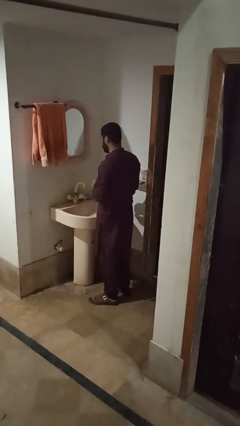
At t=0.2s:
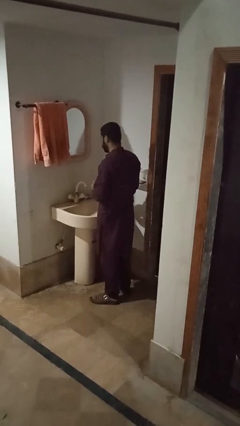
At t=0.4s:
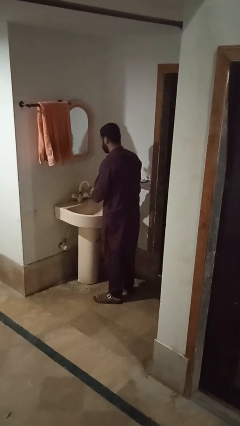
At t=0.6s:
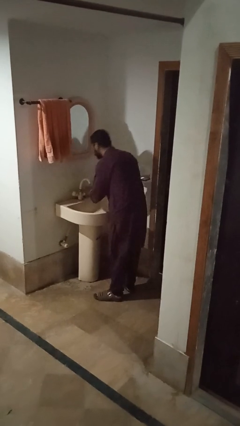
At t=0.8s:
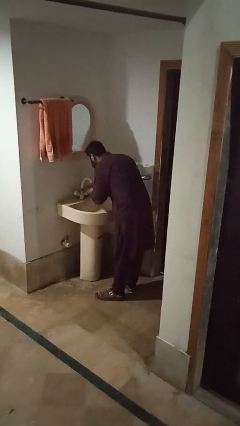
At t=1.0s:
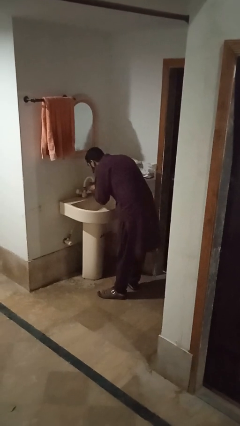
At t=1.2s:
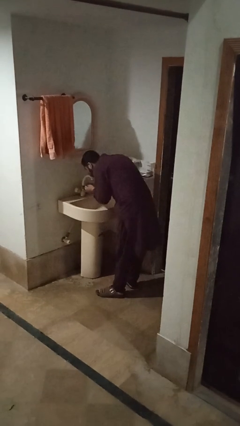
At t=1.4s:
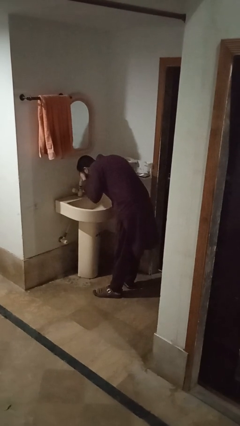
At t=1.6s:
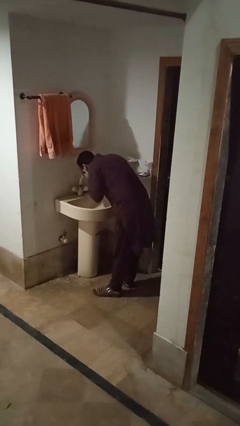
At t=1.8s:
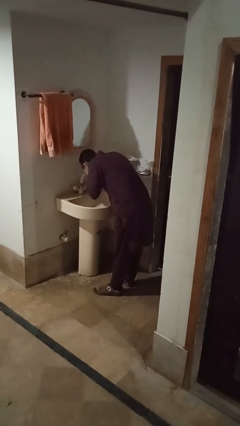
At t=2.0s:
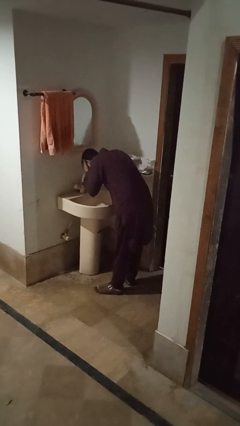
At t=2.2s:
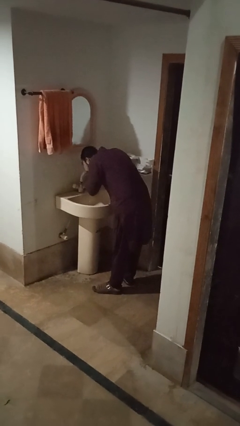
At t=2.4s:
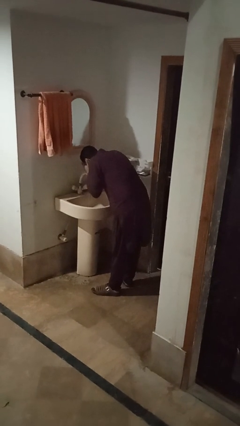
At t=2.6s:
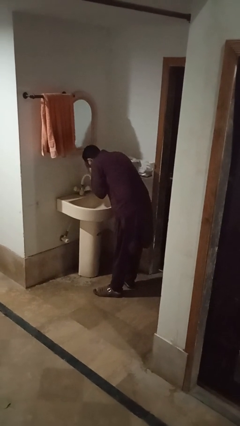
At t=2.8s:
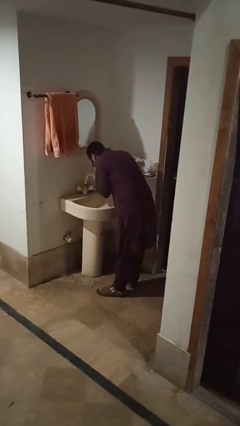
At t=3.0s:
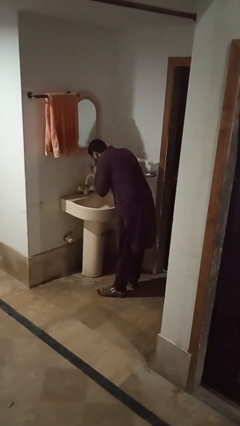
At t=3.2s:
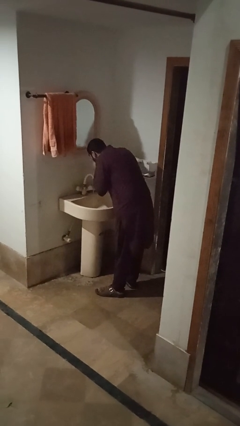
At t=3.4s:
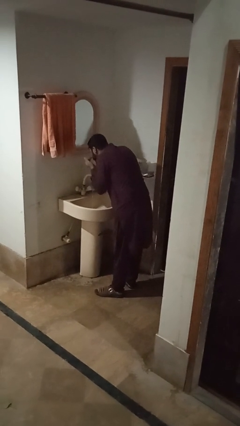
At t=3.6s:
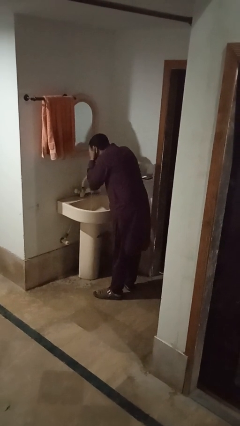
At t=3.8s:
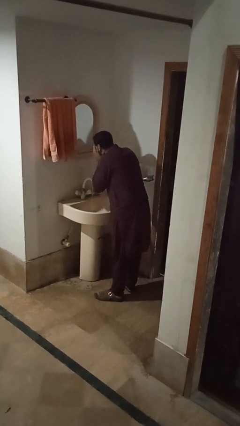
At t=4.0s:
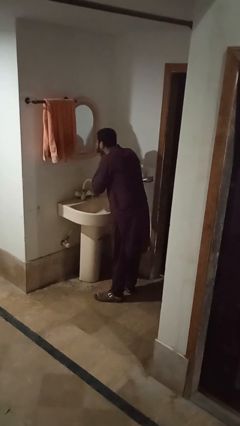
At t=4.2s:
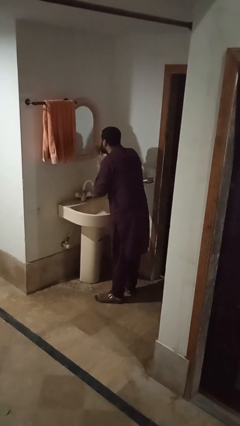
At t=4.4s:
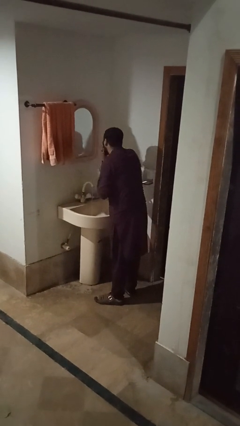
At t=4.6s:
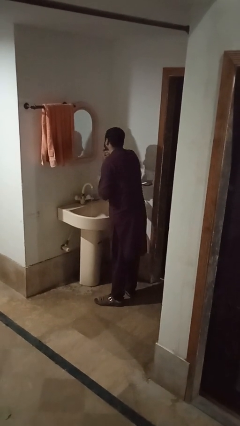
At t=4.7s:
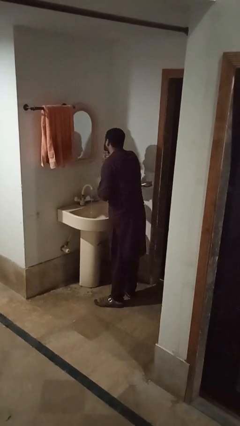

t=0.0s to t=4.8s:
person washes face

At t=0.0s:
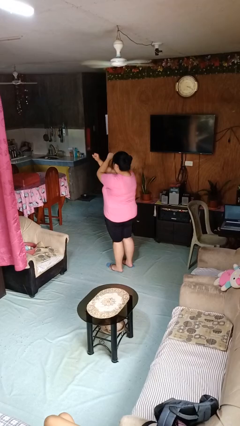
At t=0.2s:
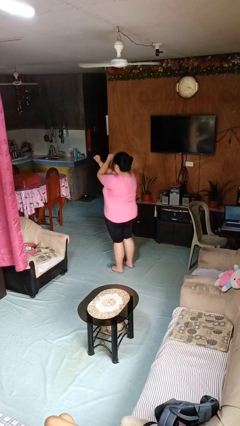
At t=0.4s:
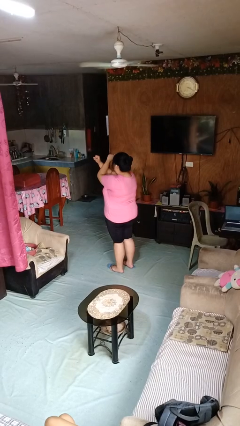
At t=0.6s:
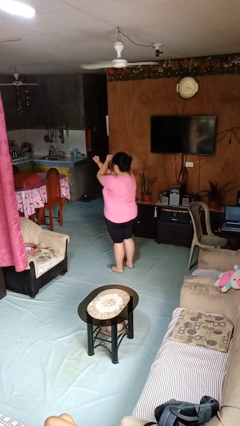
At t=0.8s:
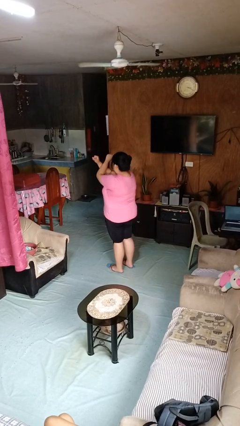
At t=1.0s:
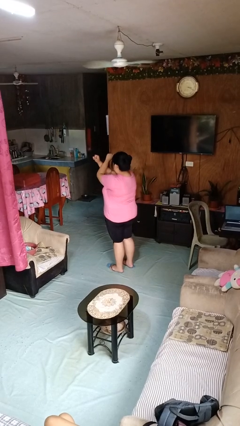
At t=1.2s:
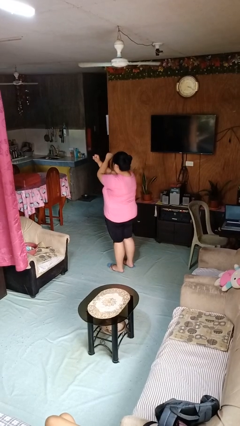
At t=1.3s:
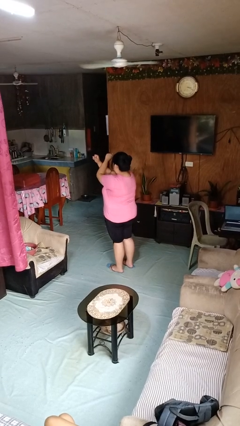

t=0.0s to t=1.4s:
person gestures arms x

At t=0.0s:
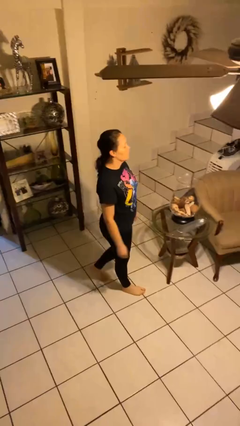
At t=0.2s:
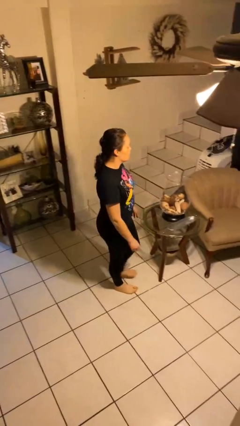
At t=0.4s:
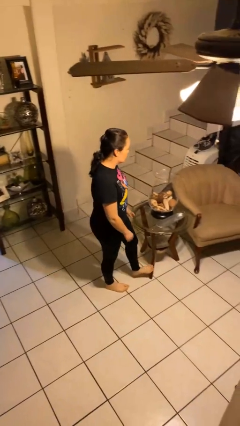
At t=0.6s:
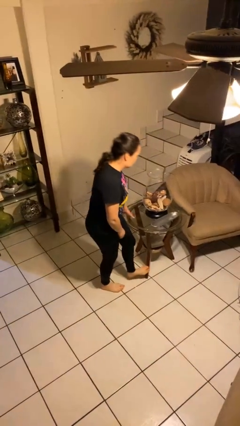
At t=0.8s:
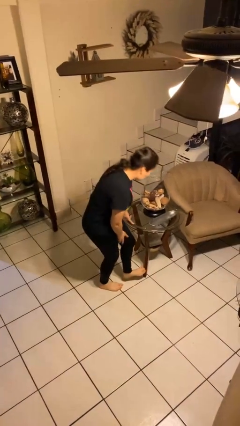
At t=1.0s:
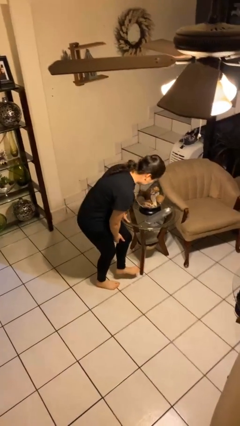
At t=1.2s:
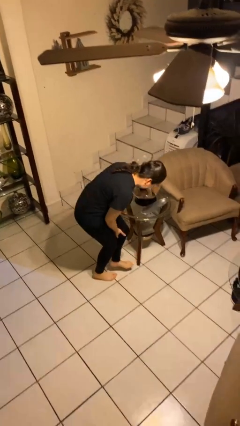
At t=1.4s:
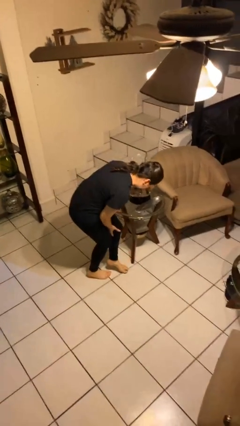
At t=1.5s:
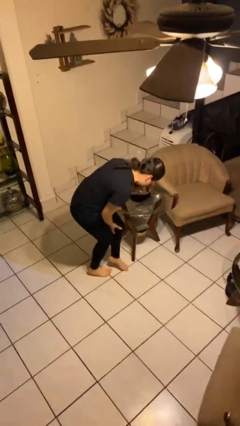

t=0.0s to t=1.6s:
person stubs toe

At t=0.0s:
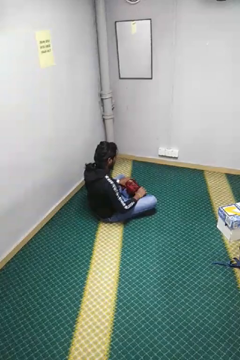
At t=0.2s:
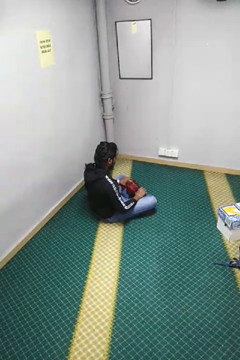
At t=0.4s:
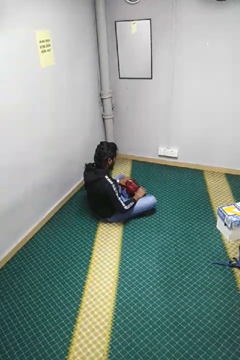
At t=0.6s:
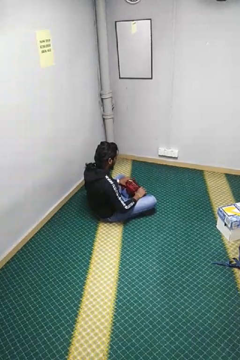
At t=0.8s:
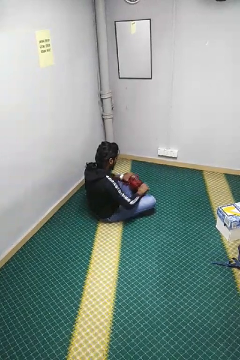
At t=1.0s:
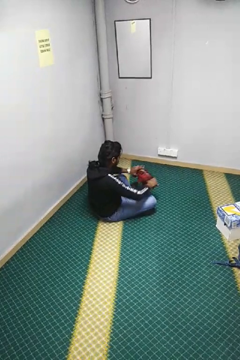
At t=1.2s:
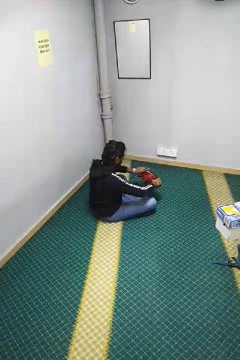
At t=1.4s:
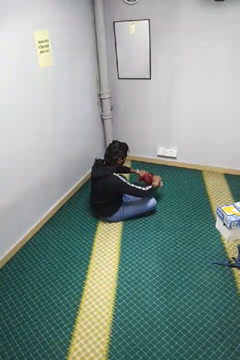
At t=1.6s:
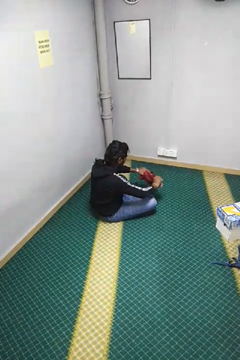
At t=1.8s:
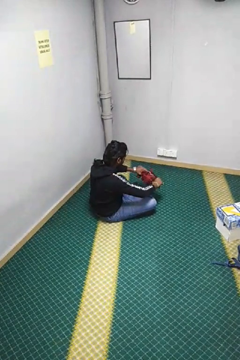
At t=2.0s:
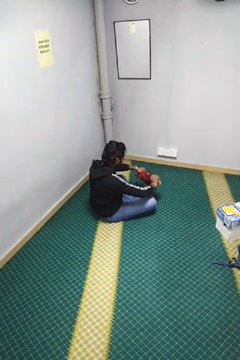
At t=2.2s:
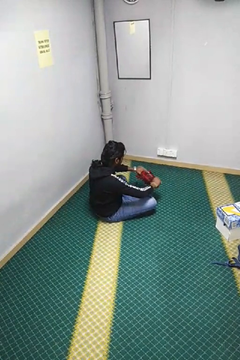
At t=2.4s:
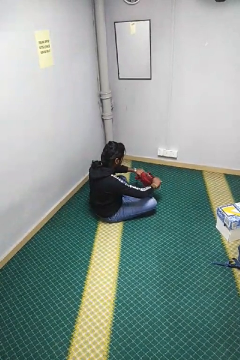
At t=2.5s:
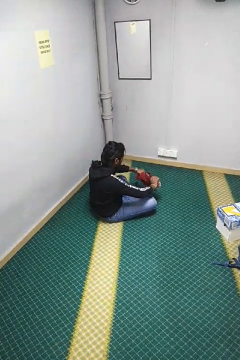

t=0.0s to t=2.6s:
person squeezes object

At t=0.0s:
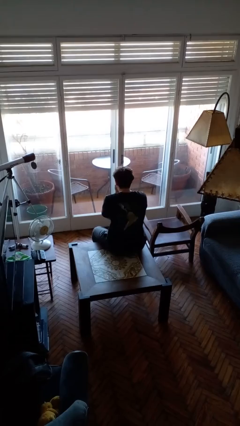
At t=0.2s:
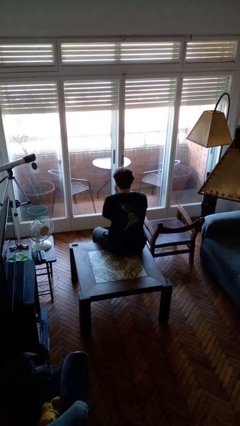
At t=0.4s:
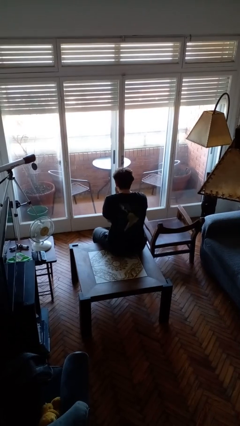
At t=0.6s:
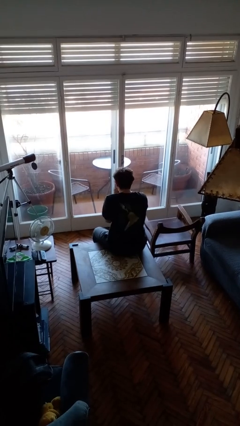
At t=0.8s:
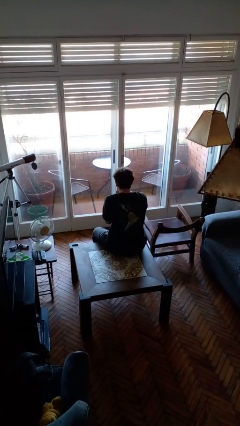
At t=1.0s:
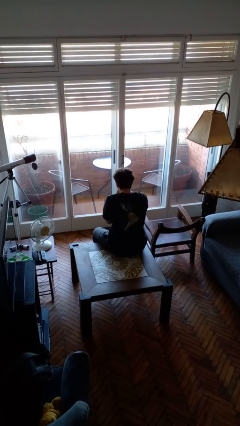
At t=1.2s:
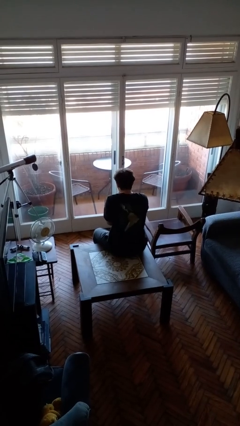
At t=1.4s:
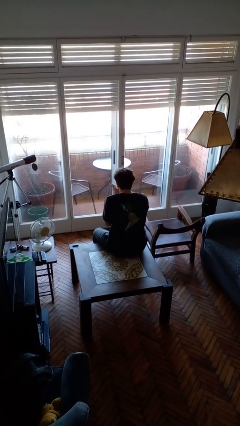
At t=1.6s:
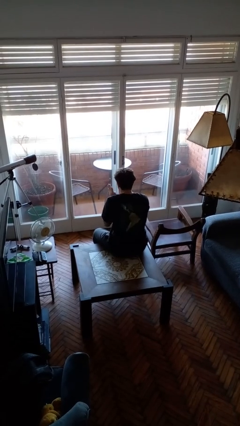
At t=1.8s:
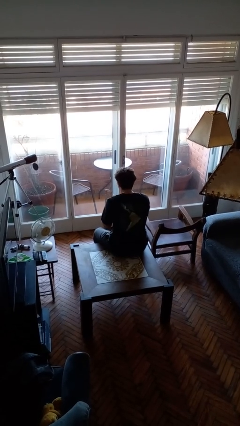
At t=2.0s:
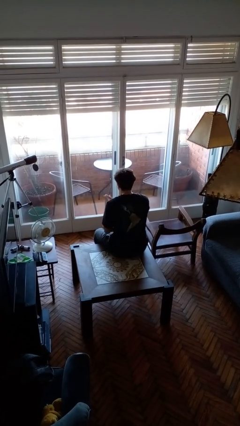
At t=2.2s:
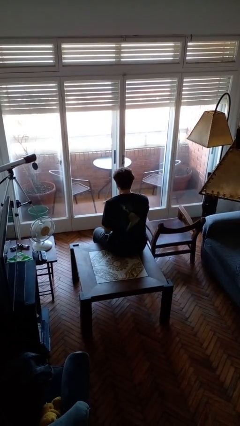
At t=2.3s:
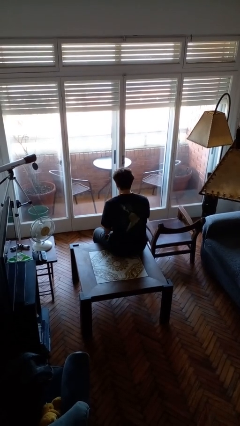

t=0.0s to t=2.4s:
person blows into hands

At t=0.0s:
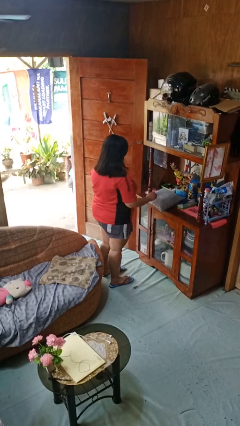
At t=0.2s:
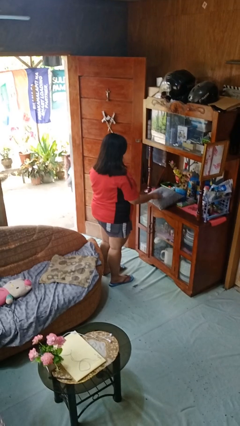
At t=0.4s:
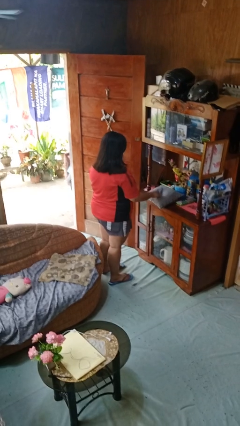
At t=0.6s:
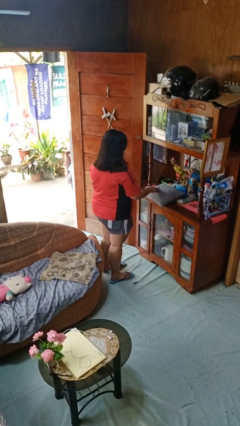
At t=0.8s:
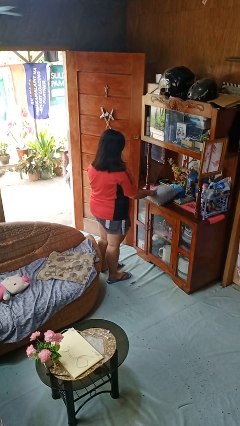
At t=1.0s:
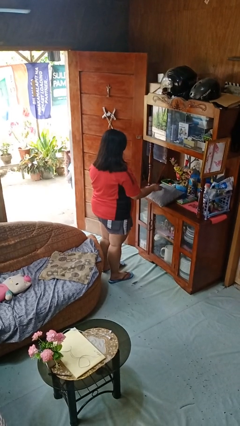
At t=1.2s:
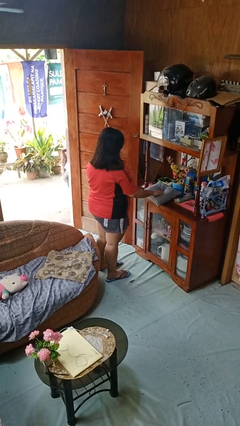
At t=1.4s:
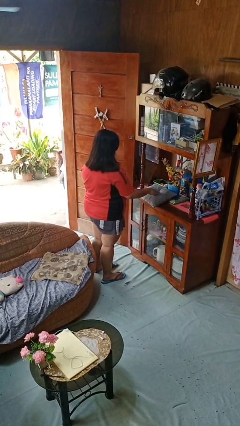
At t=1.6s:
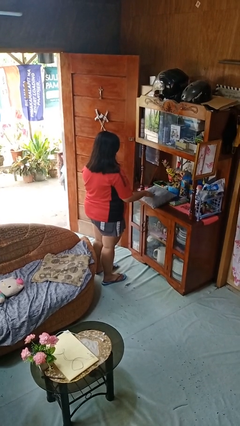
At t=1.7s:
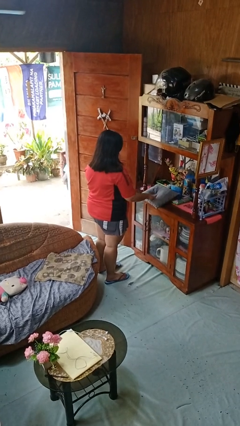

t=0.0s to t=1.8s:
person taps object with finger

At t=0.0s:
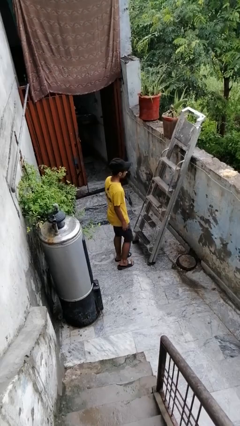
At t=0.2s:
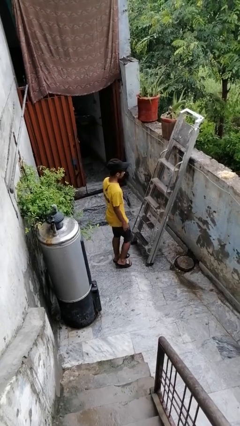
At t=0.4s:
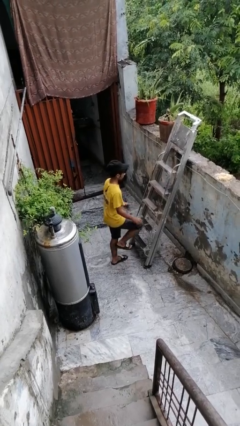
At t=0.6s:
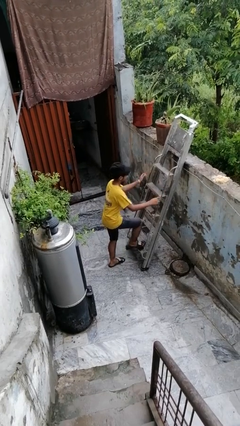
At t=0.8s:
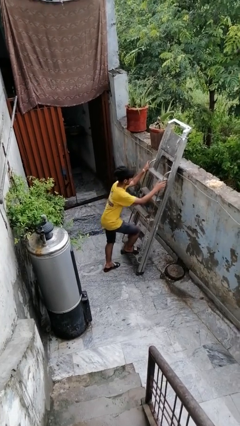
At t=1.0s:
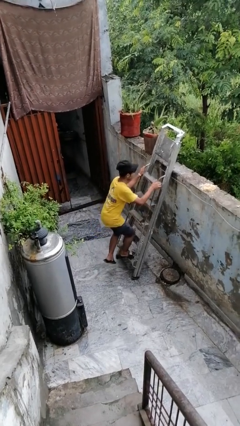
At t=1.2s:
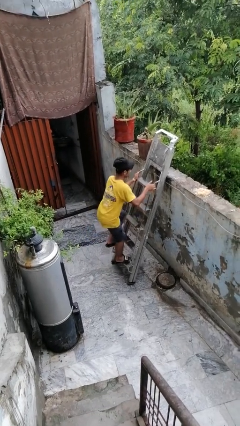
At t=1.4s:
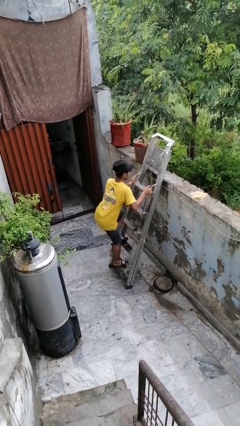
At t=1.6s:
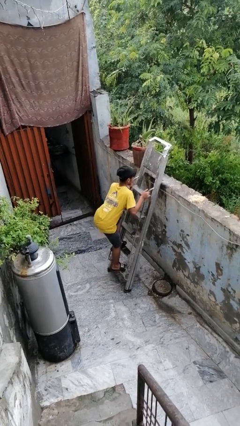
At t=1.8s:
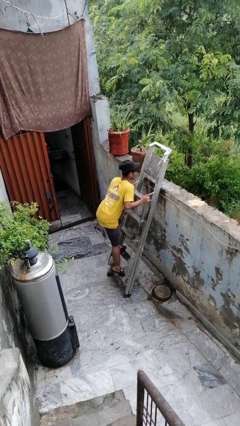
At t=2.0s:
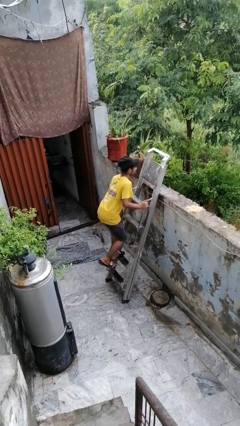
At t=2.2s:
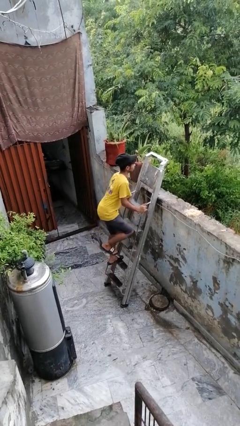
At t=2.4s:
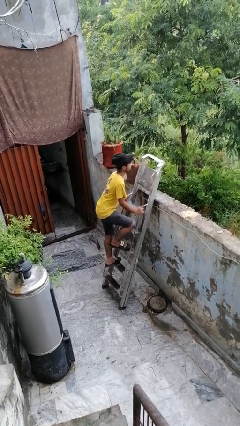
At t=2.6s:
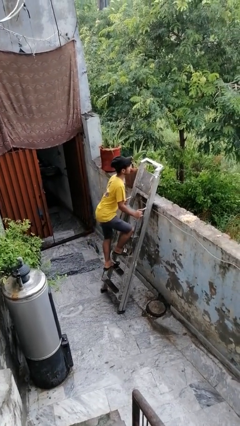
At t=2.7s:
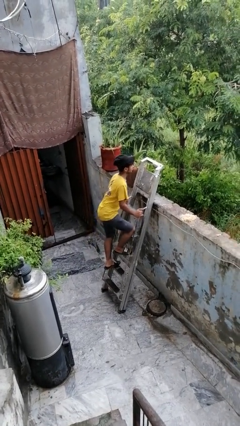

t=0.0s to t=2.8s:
person climbs up ladder
